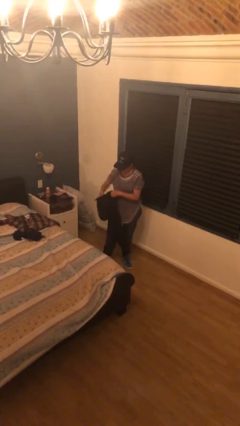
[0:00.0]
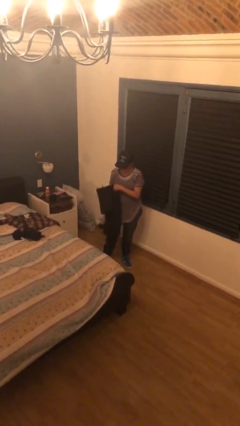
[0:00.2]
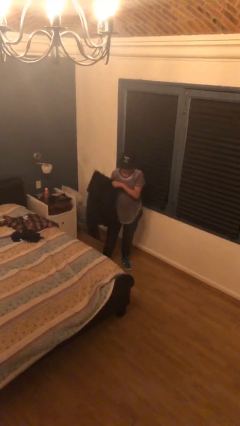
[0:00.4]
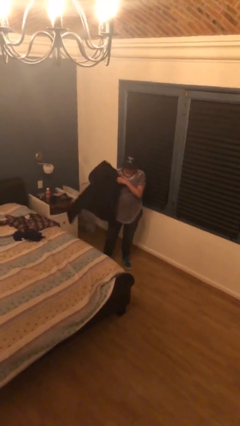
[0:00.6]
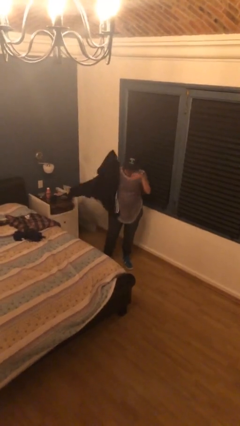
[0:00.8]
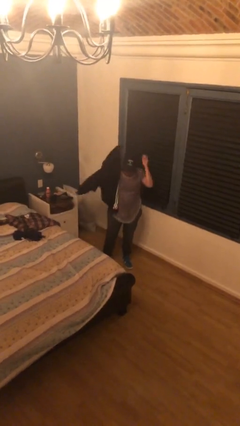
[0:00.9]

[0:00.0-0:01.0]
person takes off jacket

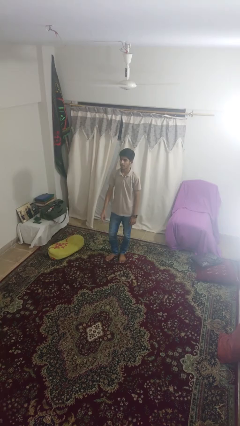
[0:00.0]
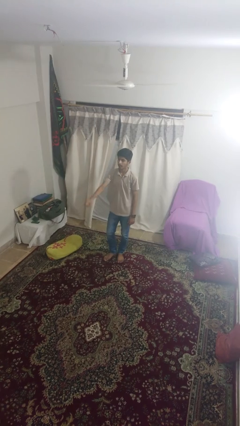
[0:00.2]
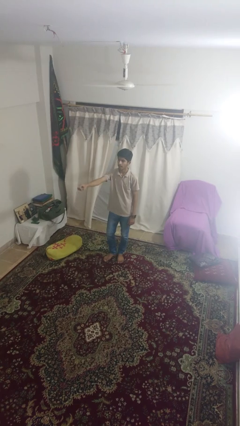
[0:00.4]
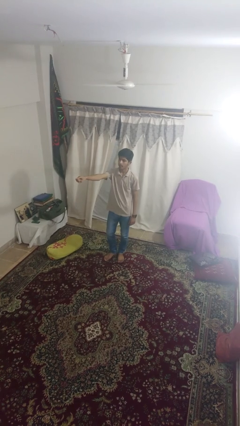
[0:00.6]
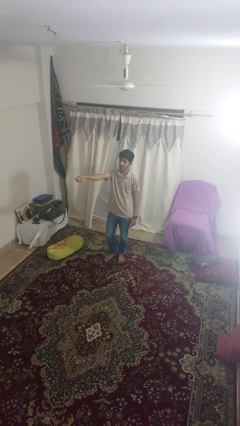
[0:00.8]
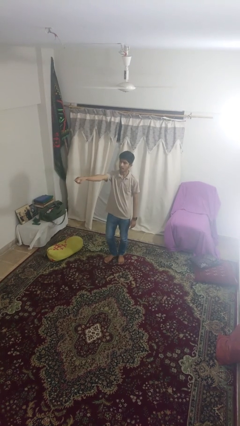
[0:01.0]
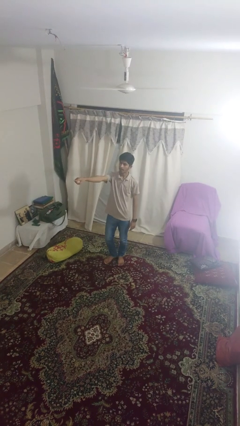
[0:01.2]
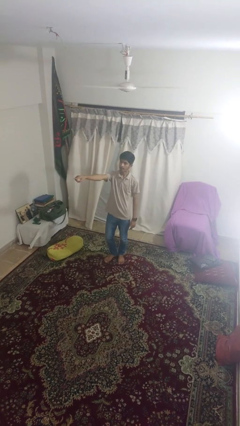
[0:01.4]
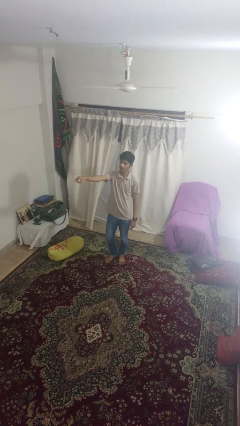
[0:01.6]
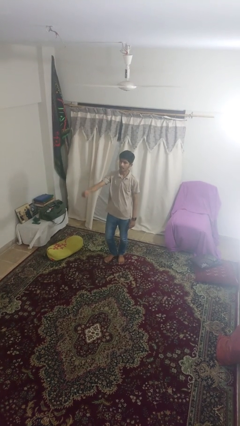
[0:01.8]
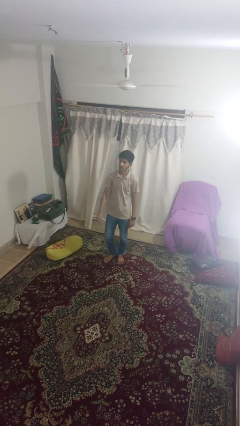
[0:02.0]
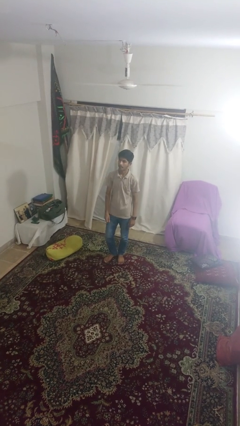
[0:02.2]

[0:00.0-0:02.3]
person points at person

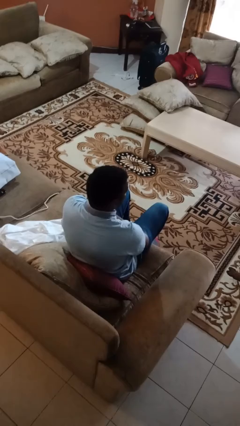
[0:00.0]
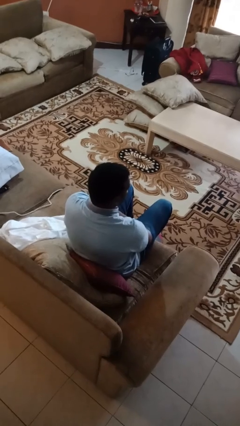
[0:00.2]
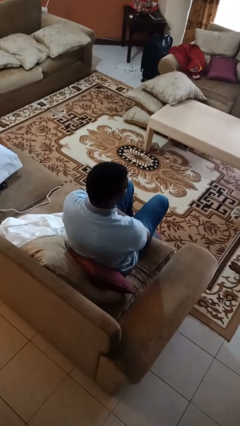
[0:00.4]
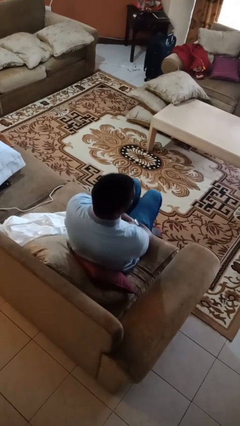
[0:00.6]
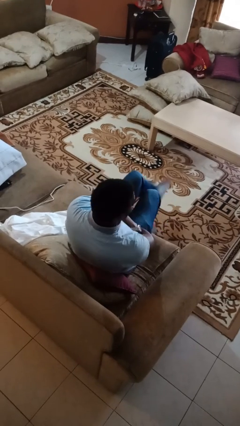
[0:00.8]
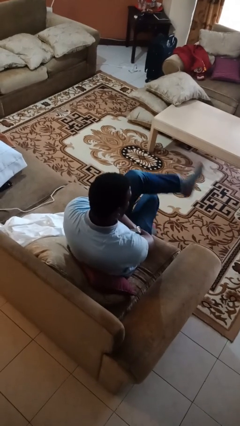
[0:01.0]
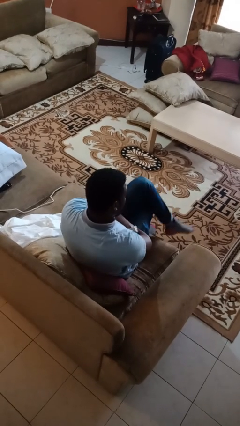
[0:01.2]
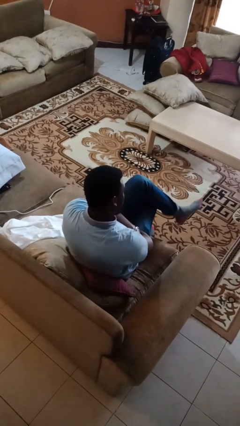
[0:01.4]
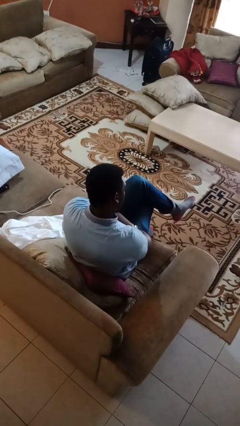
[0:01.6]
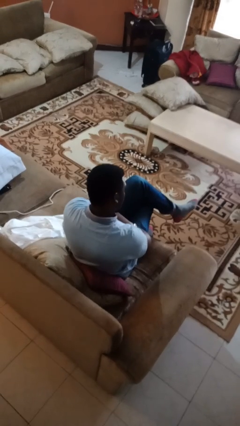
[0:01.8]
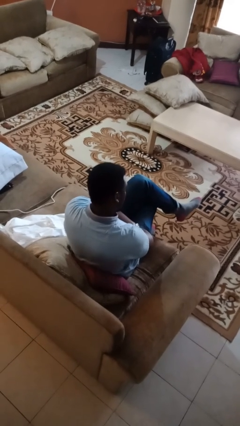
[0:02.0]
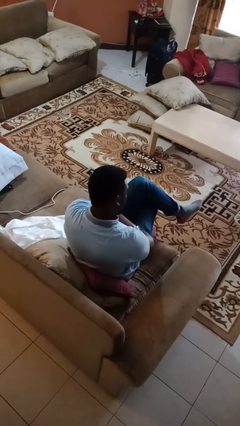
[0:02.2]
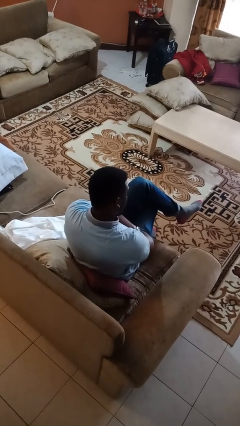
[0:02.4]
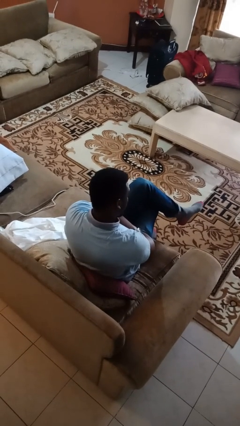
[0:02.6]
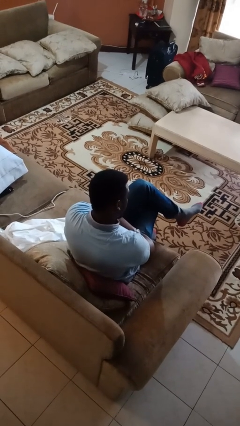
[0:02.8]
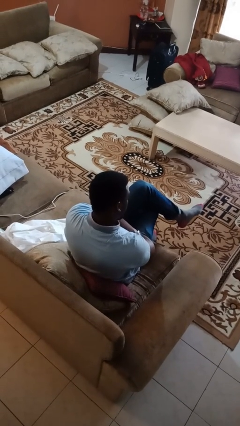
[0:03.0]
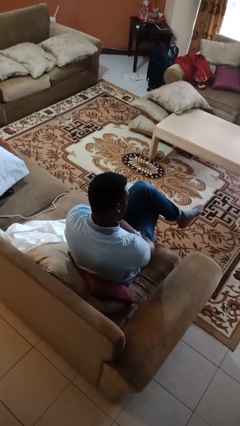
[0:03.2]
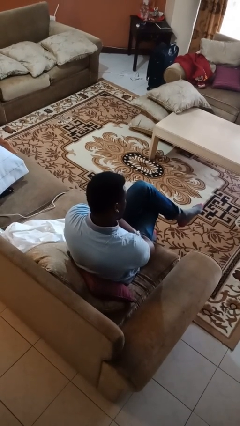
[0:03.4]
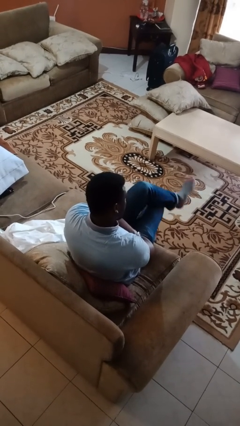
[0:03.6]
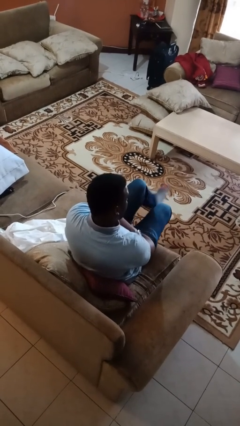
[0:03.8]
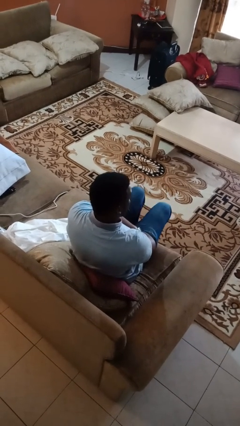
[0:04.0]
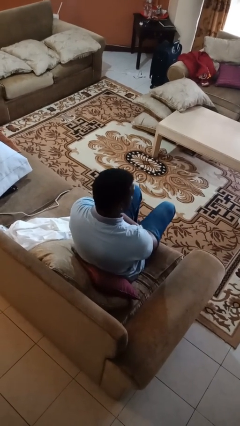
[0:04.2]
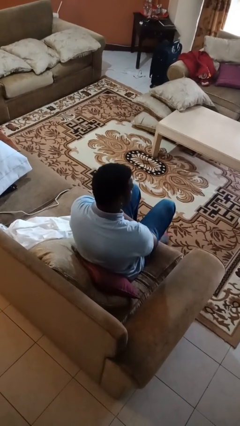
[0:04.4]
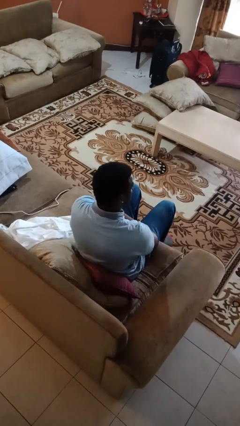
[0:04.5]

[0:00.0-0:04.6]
person crosses legs

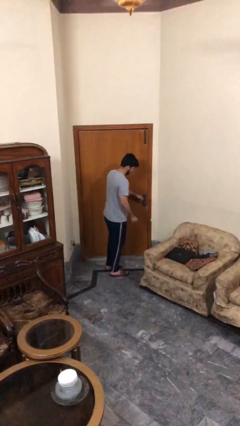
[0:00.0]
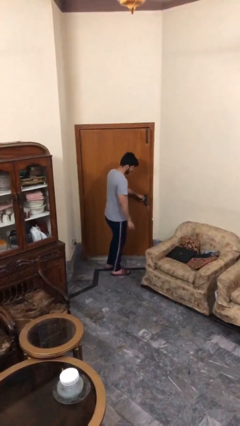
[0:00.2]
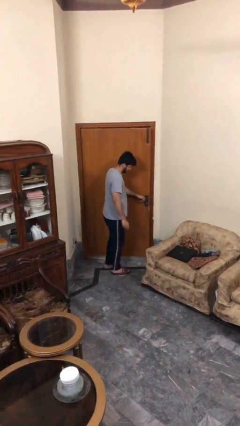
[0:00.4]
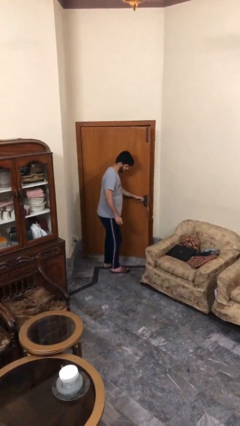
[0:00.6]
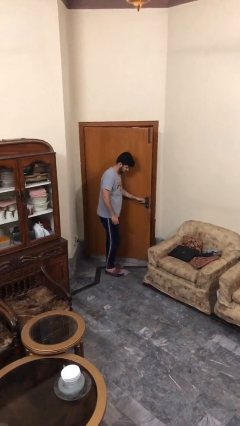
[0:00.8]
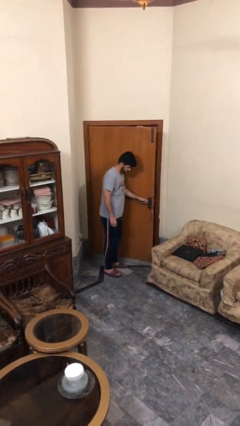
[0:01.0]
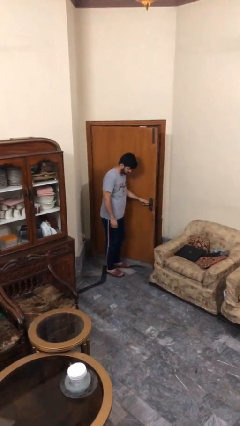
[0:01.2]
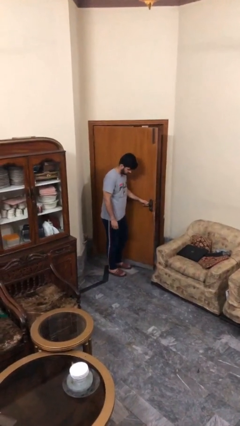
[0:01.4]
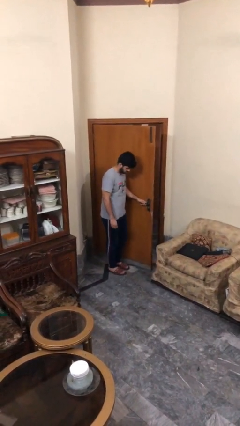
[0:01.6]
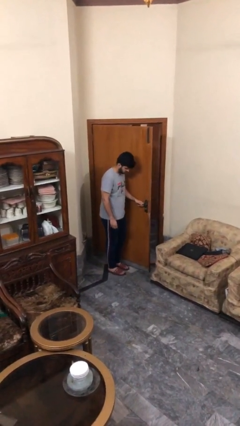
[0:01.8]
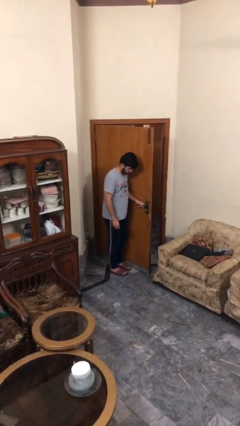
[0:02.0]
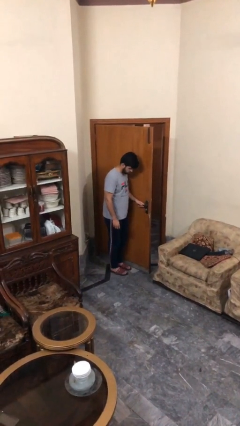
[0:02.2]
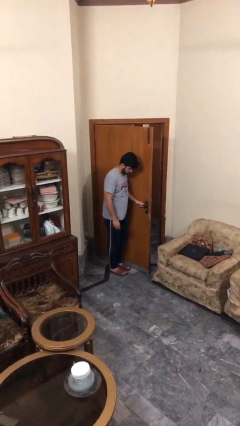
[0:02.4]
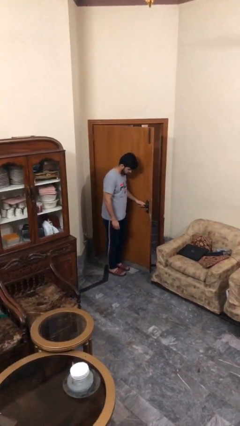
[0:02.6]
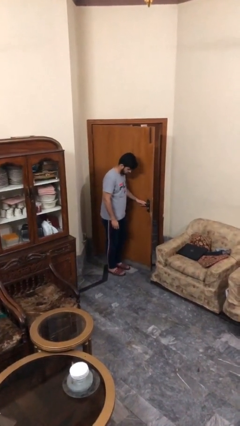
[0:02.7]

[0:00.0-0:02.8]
person opens facility door

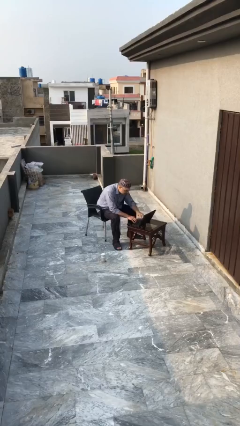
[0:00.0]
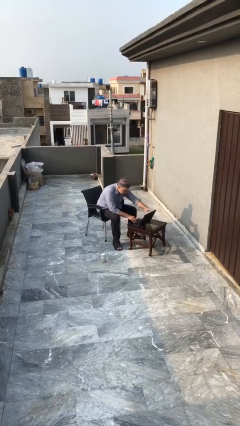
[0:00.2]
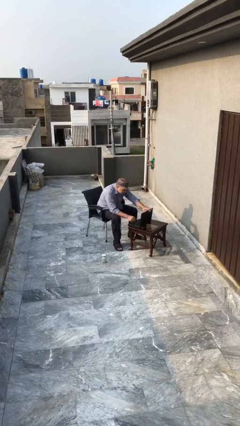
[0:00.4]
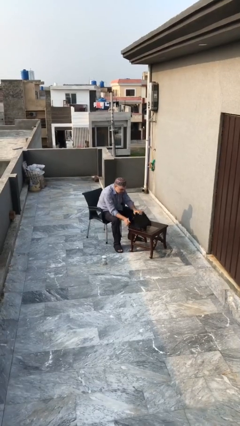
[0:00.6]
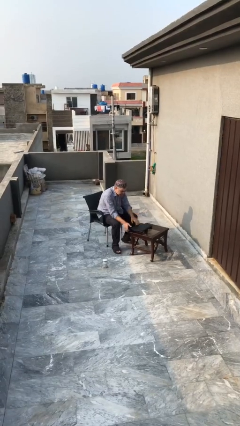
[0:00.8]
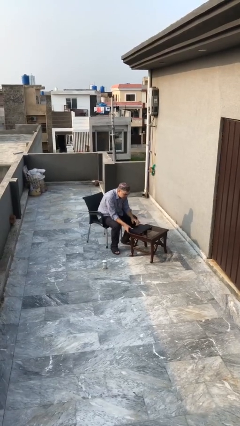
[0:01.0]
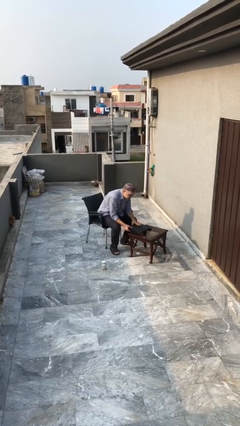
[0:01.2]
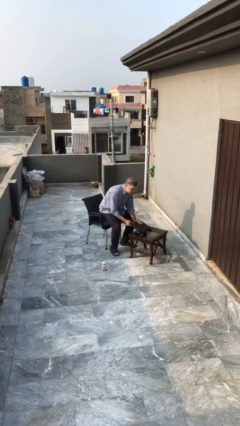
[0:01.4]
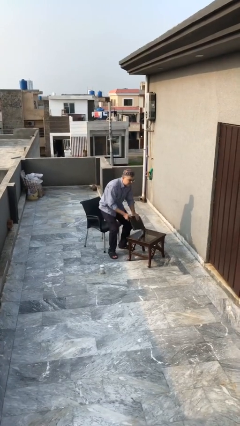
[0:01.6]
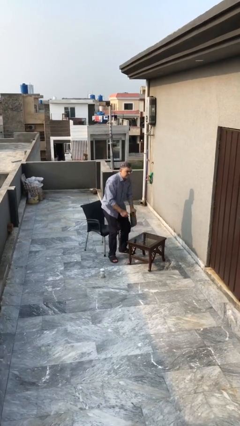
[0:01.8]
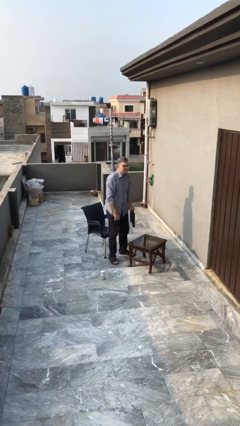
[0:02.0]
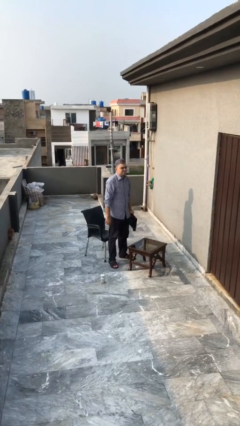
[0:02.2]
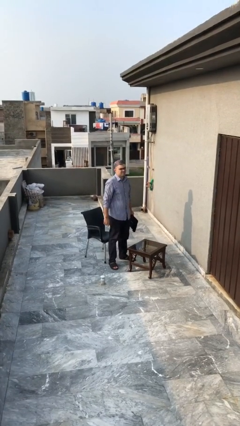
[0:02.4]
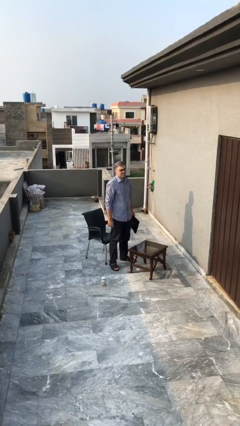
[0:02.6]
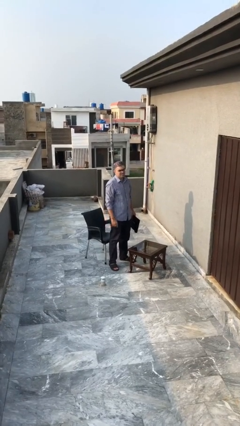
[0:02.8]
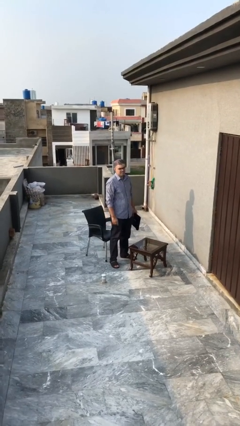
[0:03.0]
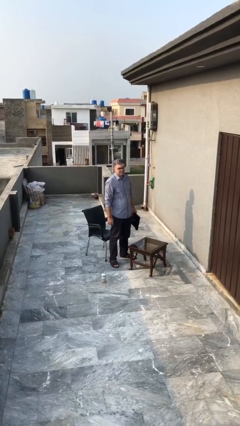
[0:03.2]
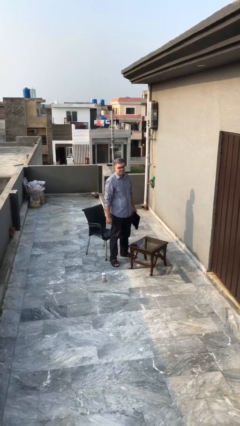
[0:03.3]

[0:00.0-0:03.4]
person stands up

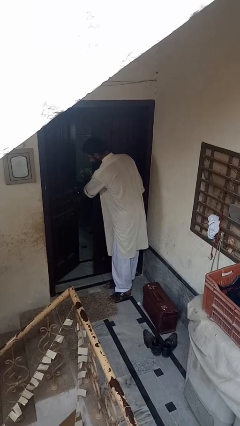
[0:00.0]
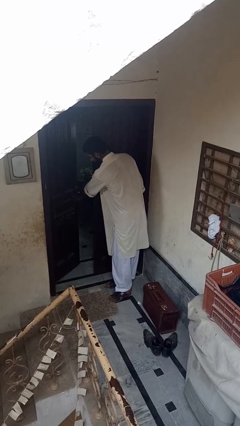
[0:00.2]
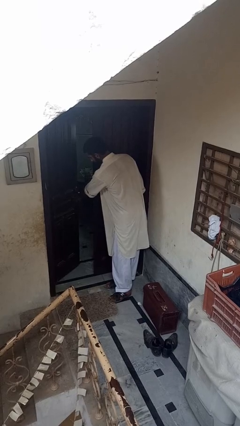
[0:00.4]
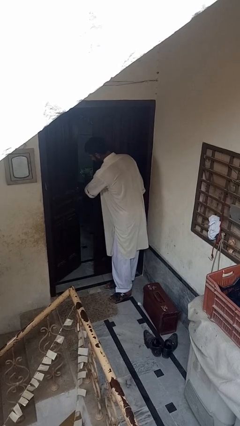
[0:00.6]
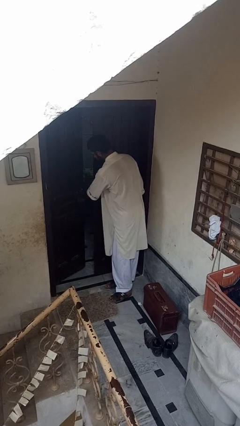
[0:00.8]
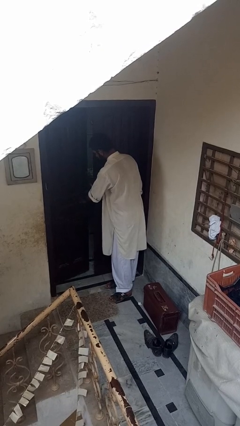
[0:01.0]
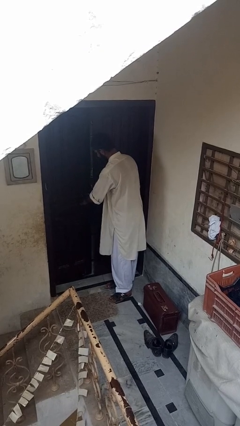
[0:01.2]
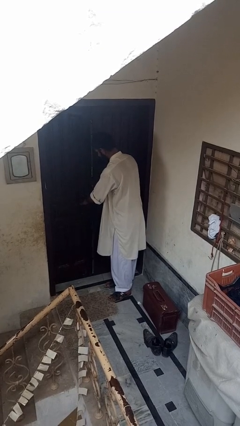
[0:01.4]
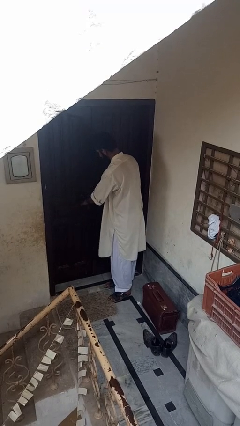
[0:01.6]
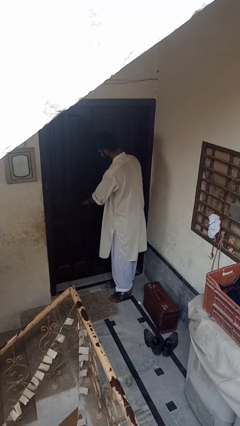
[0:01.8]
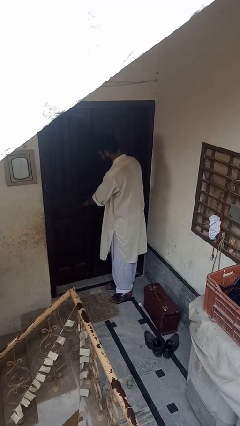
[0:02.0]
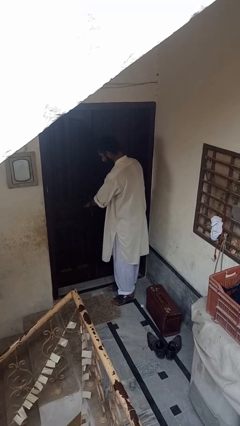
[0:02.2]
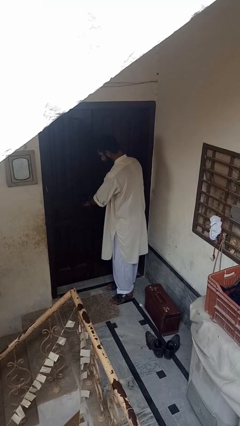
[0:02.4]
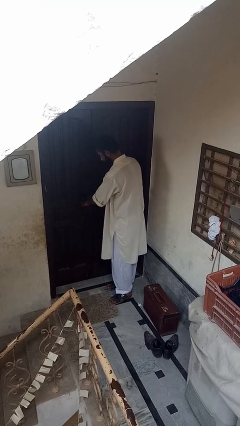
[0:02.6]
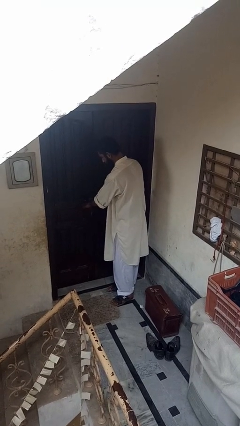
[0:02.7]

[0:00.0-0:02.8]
person closes facility door

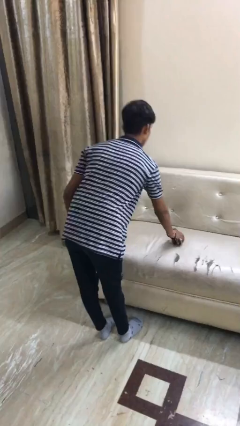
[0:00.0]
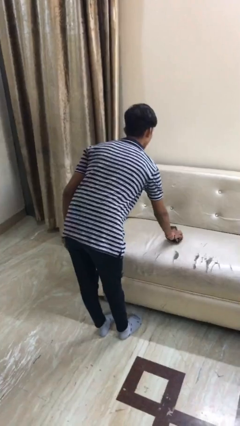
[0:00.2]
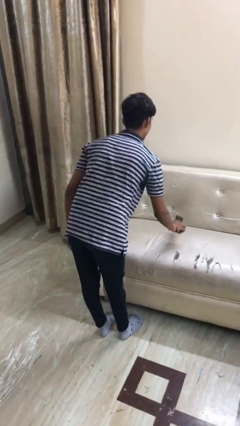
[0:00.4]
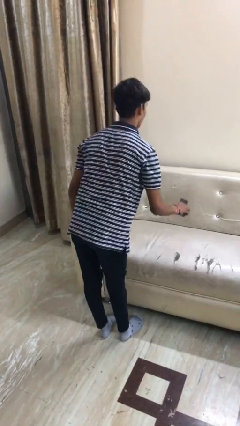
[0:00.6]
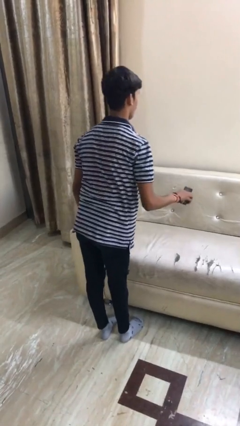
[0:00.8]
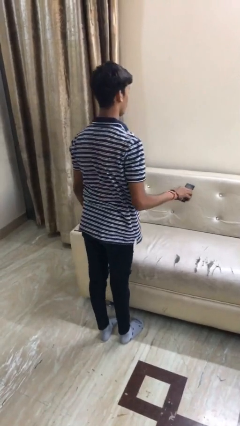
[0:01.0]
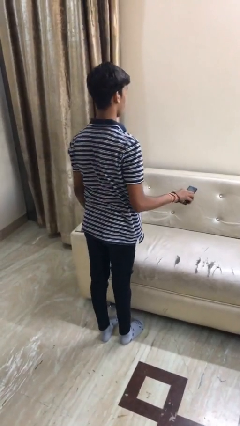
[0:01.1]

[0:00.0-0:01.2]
person picks up object from bed
